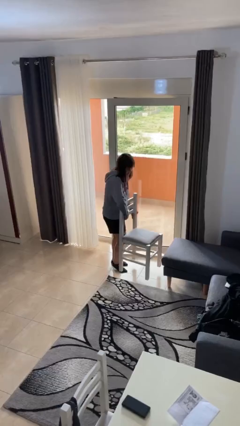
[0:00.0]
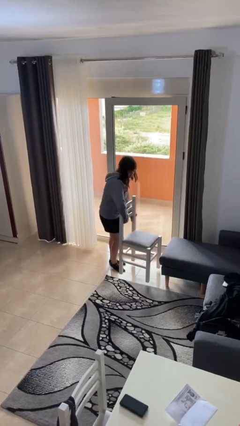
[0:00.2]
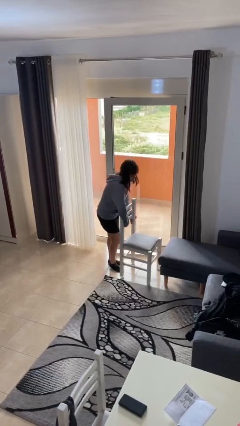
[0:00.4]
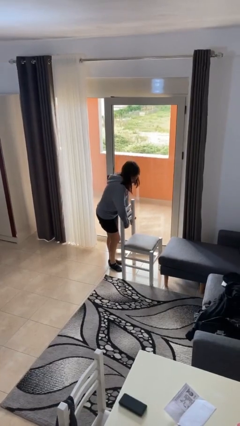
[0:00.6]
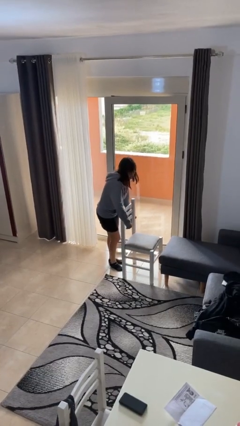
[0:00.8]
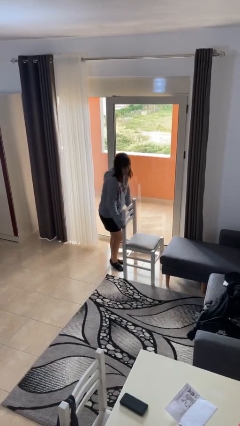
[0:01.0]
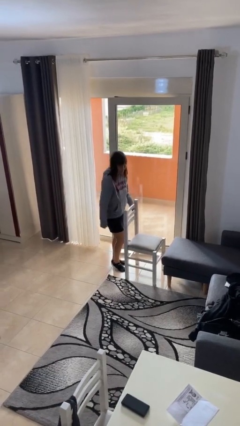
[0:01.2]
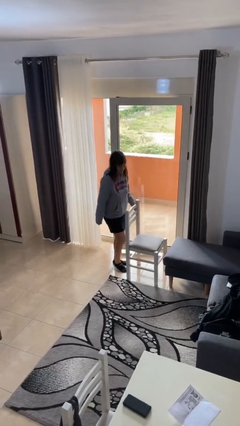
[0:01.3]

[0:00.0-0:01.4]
person puts down object on floor

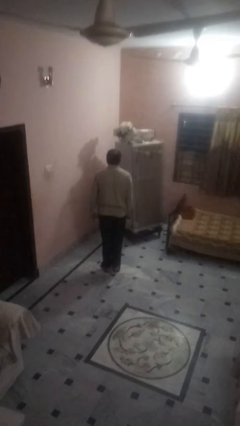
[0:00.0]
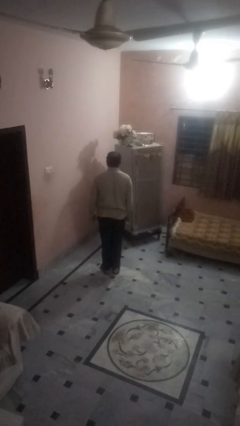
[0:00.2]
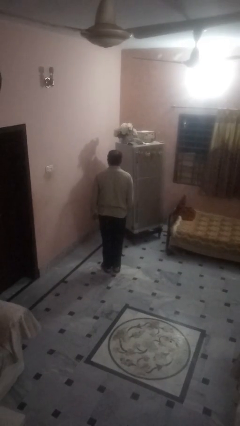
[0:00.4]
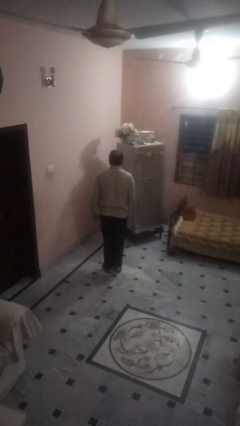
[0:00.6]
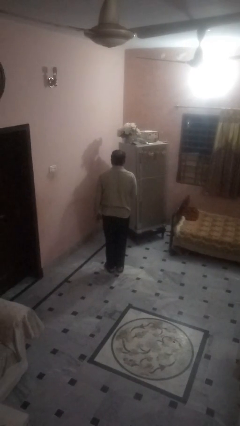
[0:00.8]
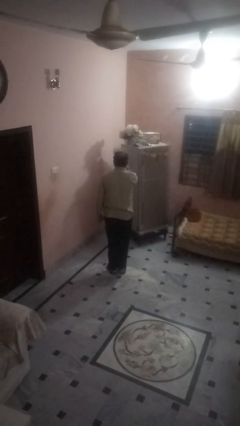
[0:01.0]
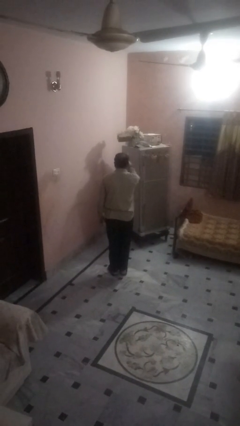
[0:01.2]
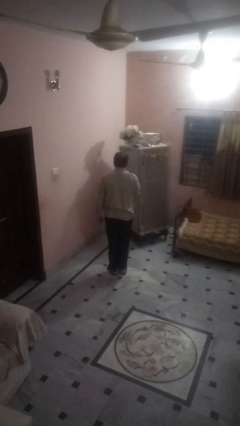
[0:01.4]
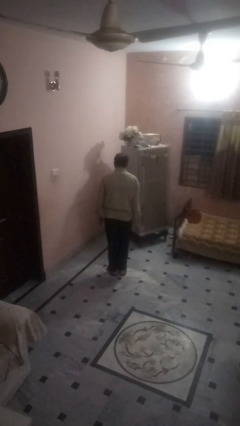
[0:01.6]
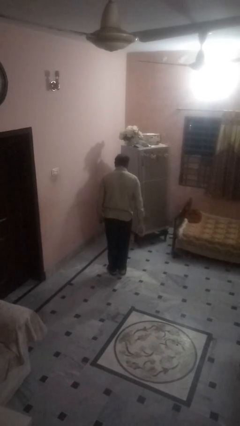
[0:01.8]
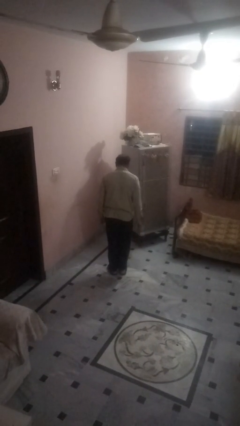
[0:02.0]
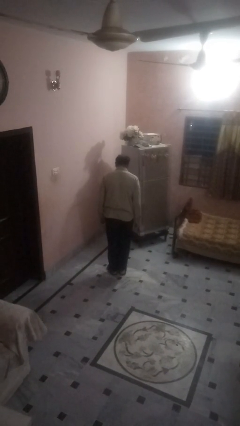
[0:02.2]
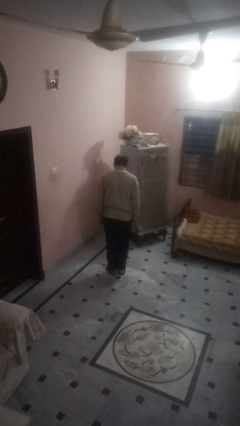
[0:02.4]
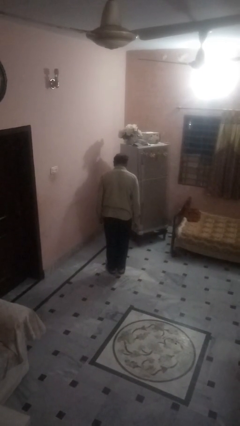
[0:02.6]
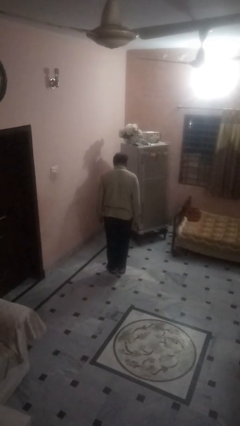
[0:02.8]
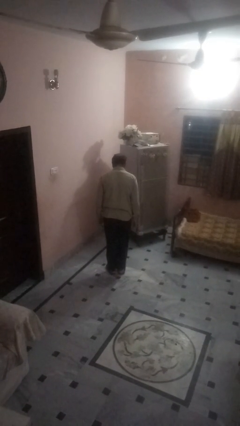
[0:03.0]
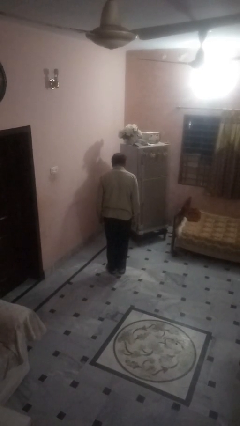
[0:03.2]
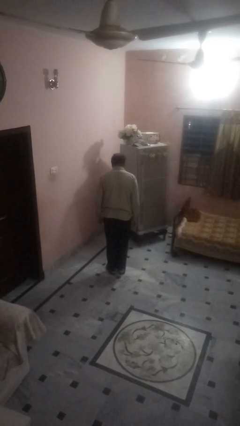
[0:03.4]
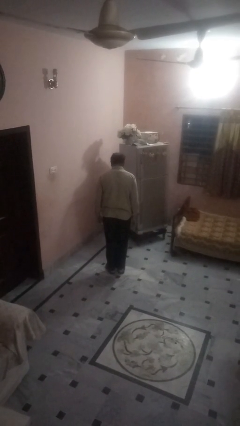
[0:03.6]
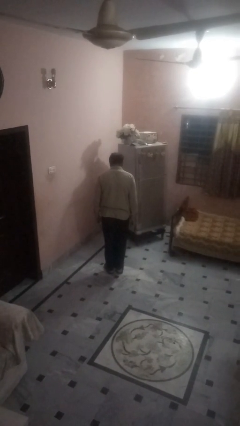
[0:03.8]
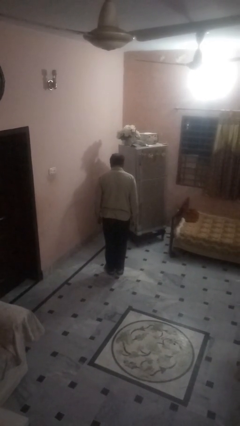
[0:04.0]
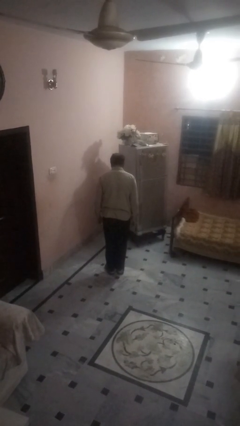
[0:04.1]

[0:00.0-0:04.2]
person throws object into air

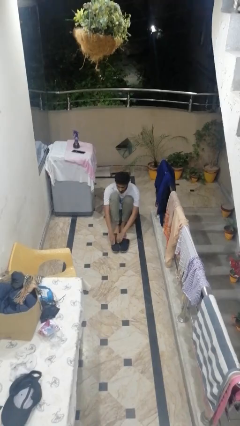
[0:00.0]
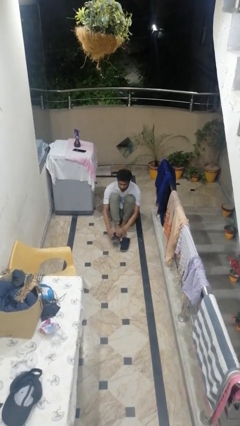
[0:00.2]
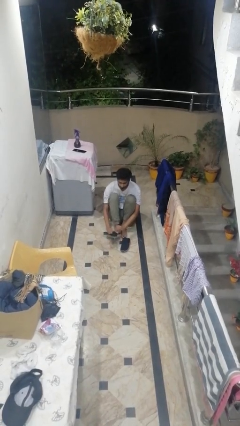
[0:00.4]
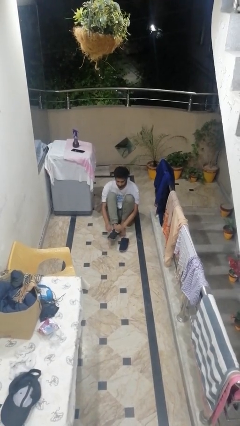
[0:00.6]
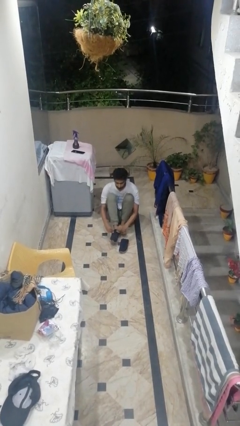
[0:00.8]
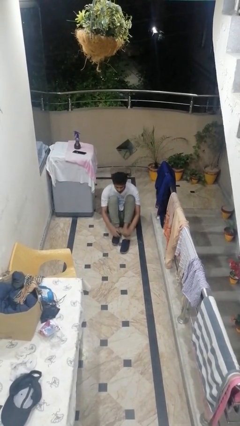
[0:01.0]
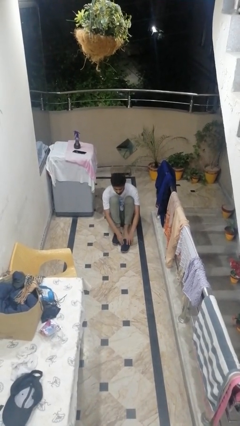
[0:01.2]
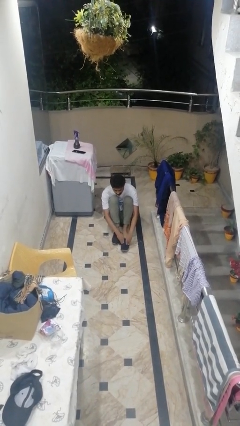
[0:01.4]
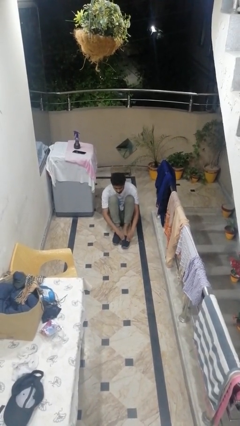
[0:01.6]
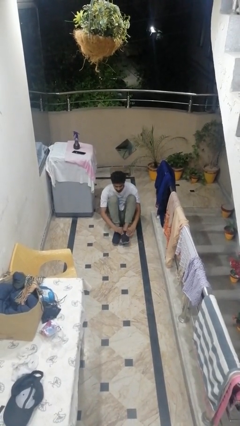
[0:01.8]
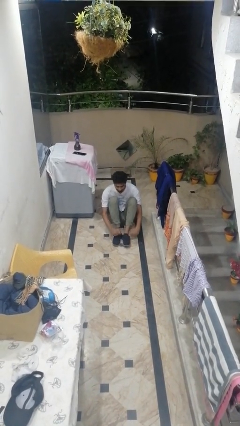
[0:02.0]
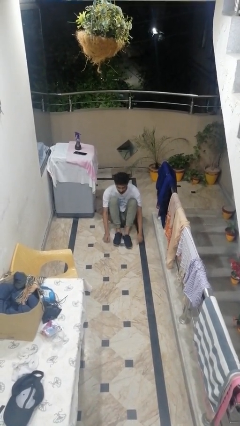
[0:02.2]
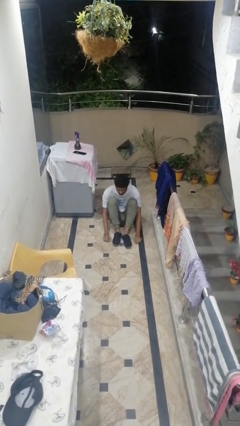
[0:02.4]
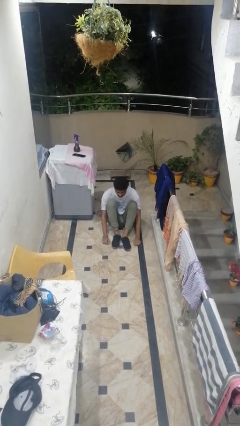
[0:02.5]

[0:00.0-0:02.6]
person puts on shoes

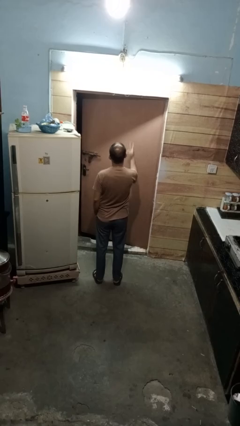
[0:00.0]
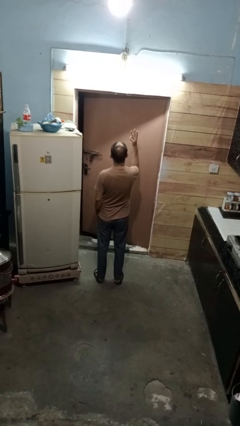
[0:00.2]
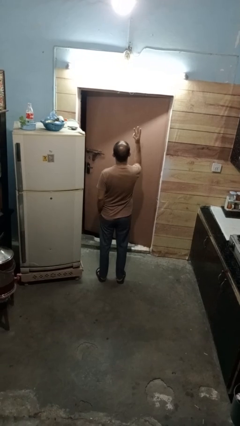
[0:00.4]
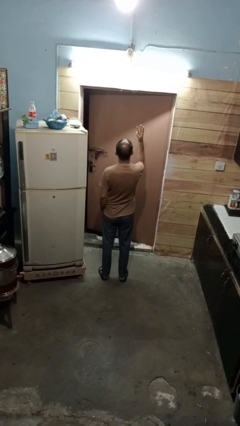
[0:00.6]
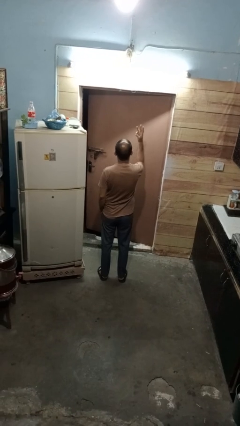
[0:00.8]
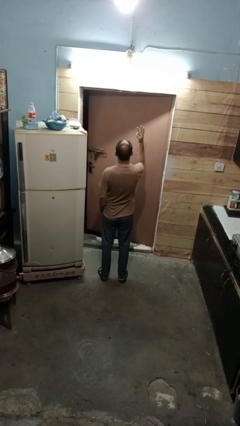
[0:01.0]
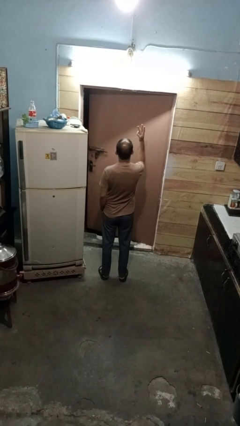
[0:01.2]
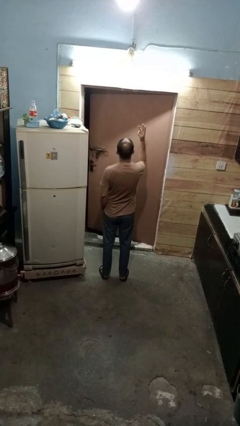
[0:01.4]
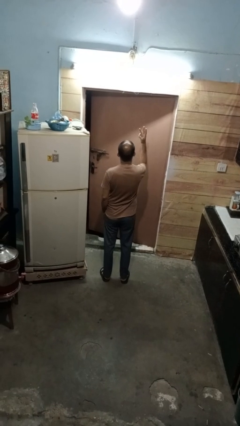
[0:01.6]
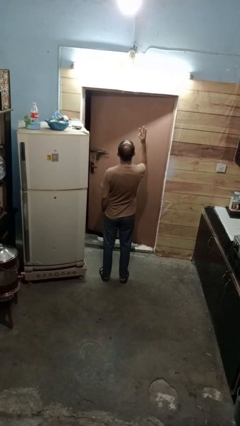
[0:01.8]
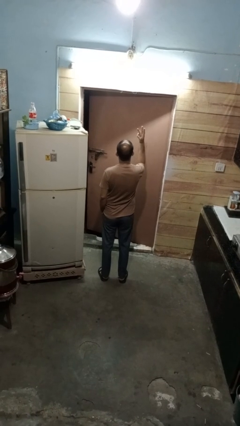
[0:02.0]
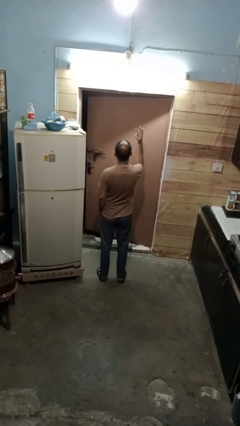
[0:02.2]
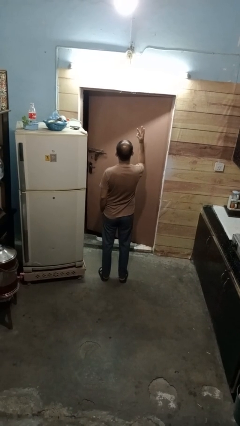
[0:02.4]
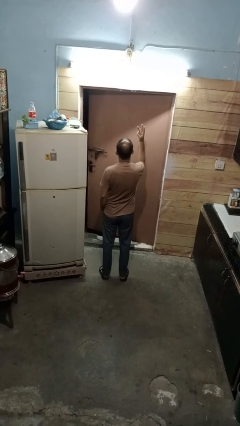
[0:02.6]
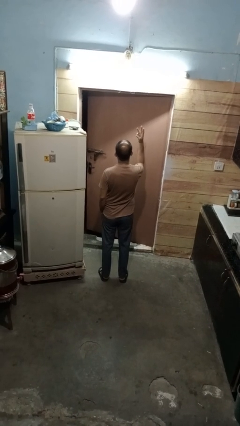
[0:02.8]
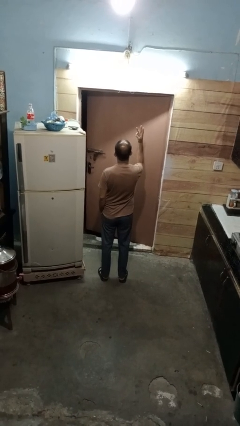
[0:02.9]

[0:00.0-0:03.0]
person gestures number three

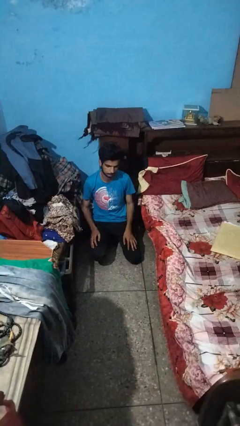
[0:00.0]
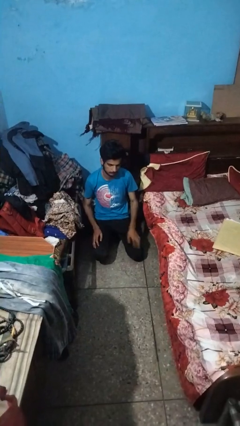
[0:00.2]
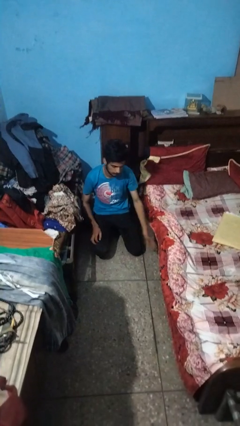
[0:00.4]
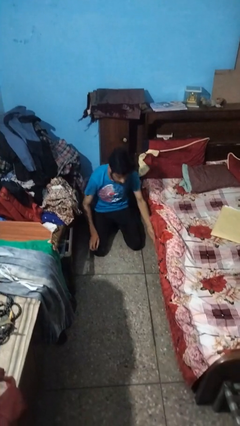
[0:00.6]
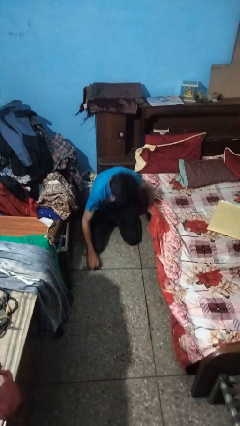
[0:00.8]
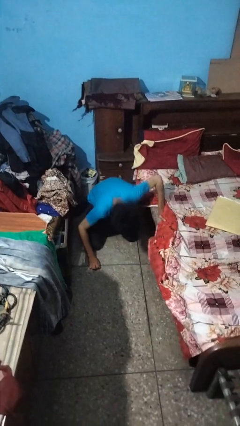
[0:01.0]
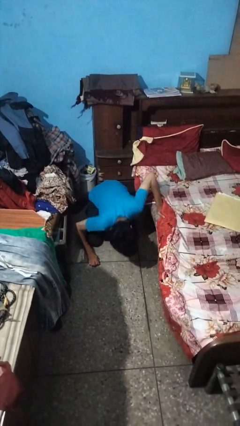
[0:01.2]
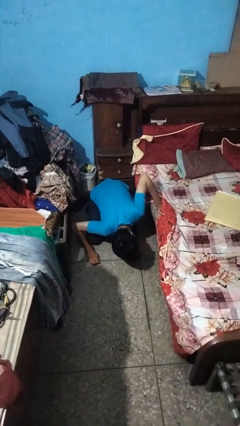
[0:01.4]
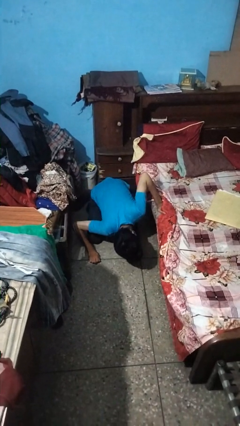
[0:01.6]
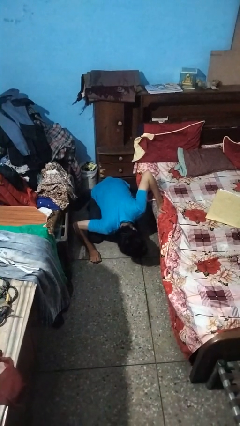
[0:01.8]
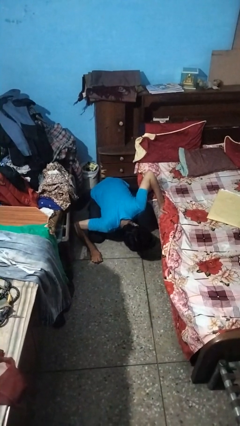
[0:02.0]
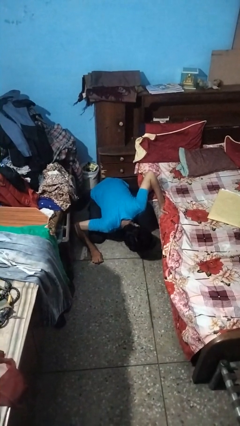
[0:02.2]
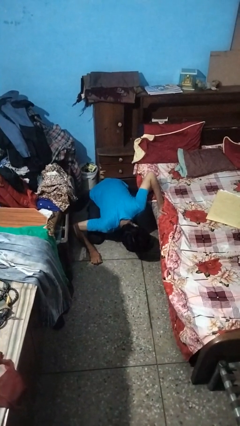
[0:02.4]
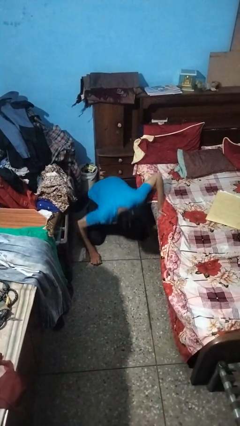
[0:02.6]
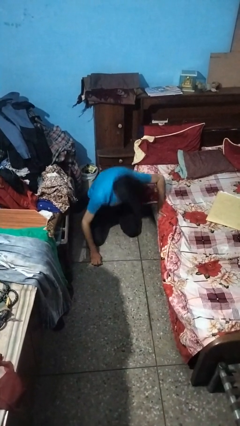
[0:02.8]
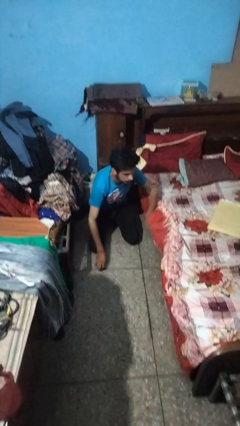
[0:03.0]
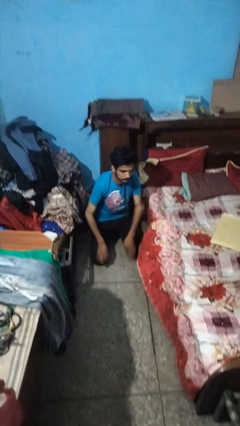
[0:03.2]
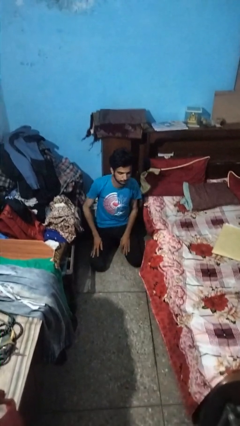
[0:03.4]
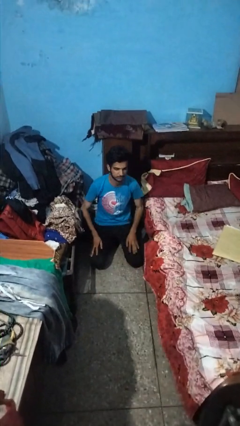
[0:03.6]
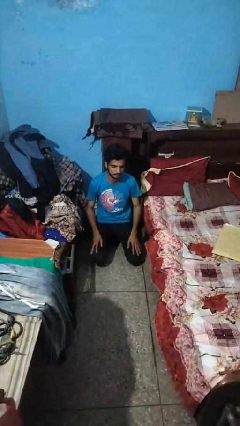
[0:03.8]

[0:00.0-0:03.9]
person searches under bed

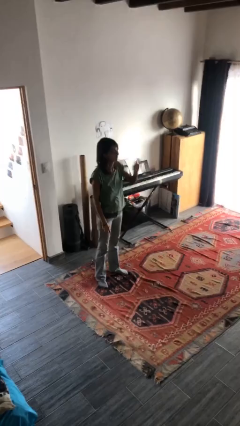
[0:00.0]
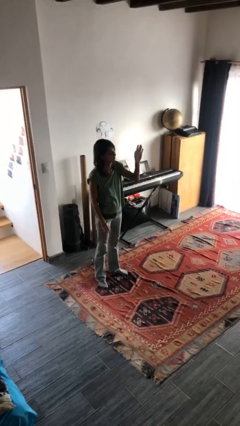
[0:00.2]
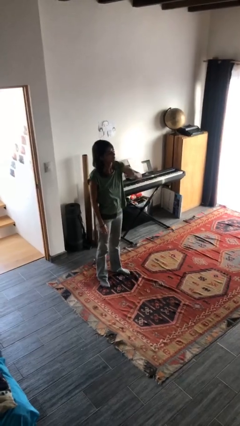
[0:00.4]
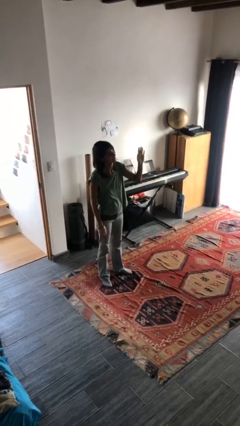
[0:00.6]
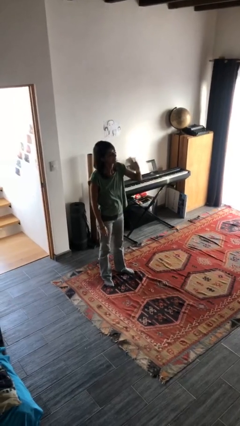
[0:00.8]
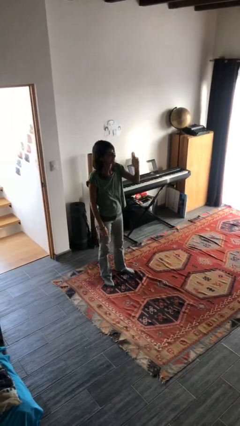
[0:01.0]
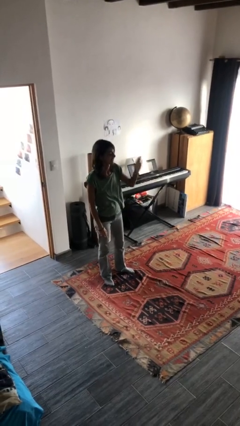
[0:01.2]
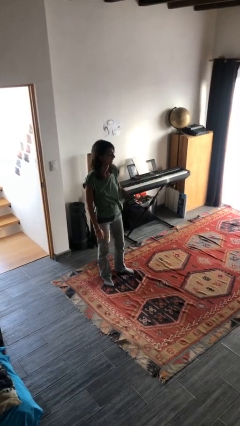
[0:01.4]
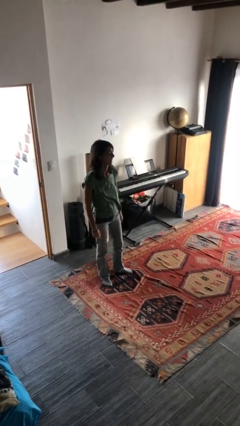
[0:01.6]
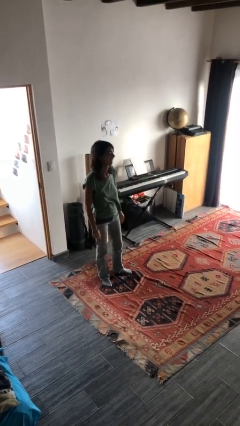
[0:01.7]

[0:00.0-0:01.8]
person waves at person

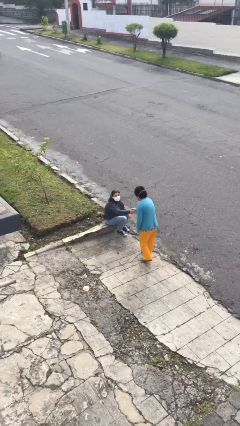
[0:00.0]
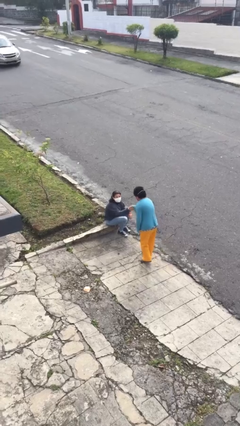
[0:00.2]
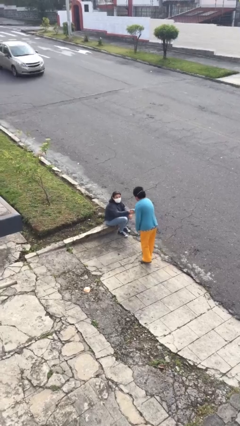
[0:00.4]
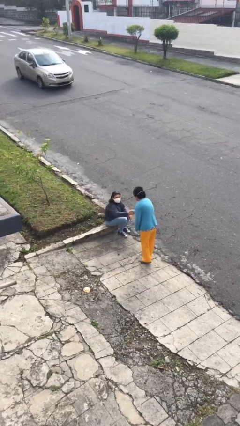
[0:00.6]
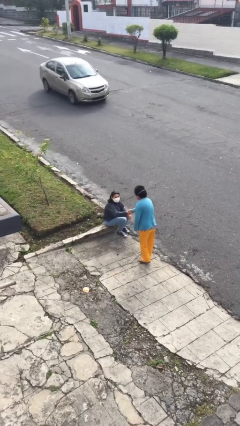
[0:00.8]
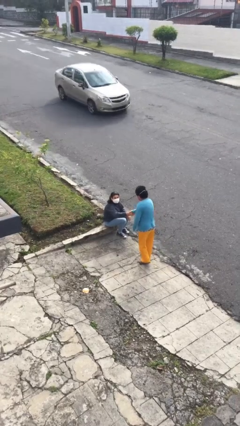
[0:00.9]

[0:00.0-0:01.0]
person shakes hand
